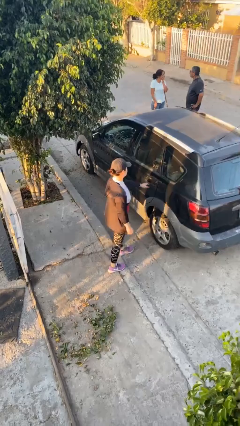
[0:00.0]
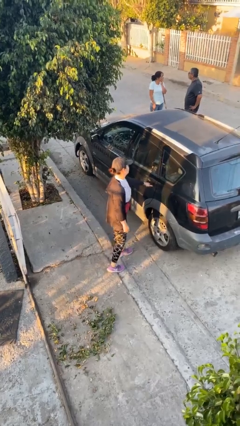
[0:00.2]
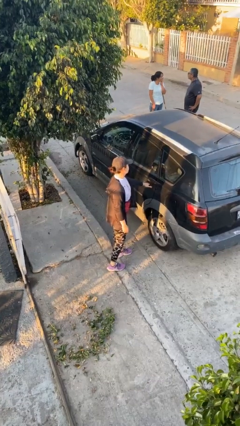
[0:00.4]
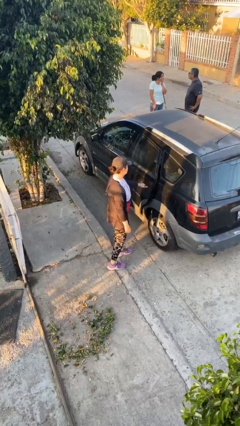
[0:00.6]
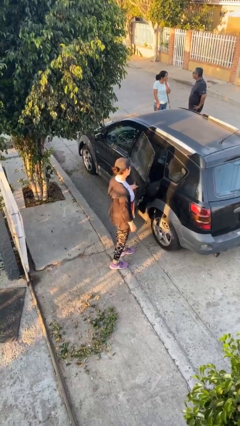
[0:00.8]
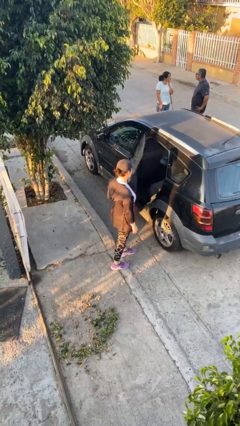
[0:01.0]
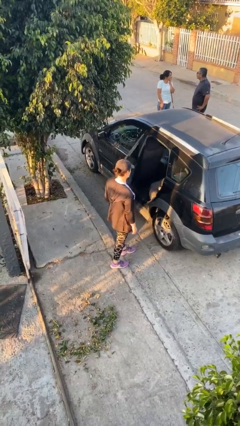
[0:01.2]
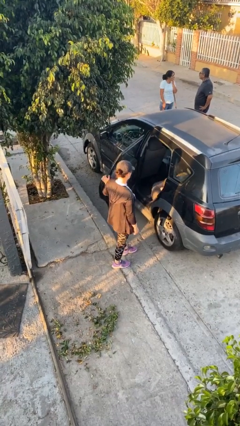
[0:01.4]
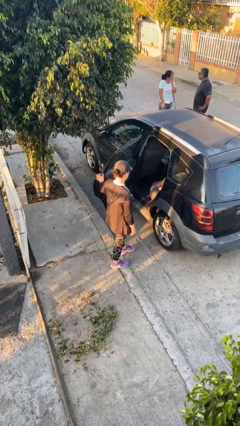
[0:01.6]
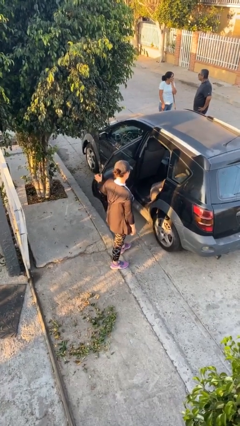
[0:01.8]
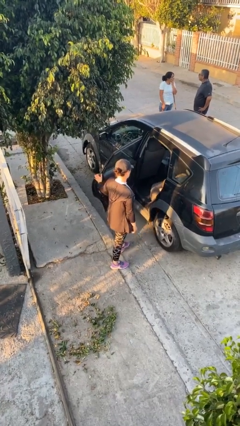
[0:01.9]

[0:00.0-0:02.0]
person opens car door

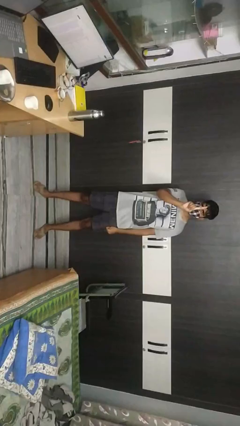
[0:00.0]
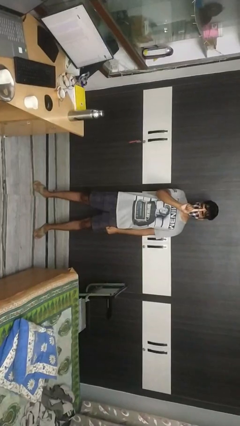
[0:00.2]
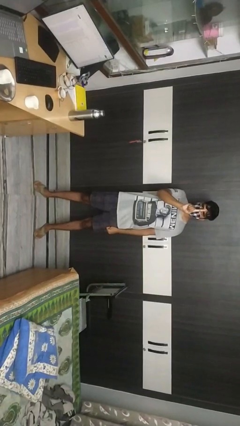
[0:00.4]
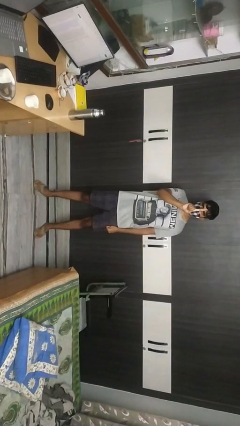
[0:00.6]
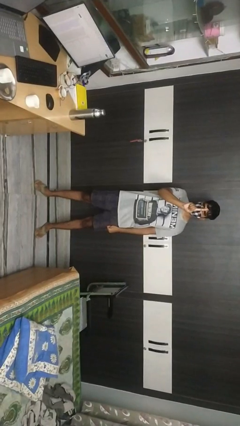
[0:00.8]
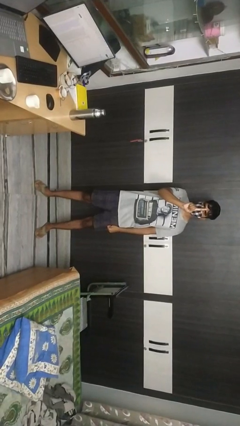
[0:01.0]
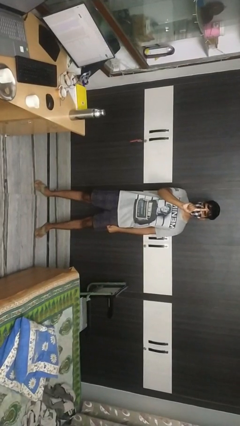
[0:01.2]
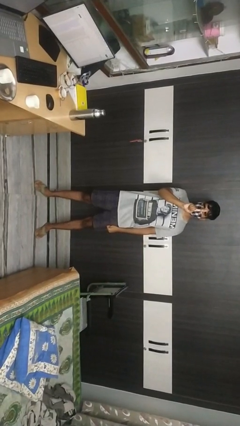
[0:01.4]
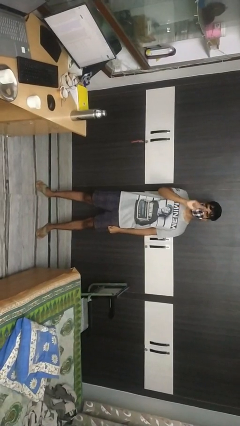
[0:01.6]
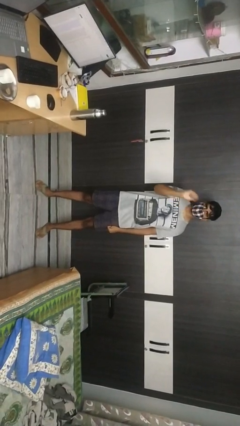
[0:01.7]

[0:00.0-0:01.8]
person gestures number one

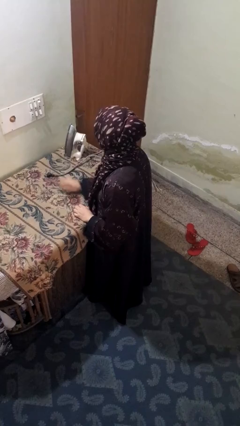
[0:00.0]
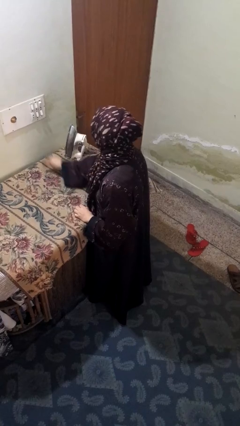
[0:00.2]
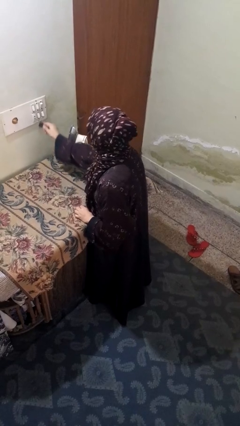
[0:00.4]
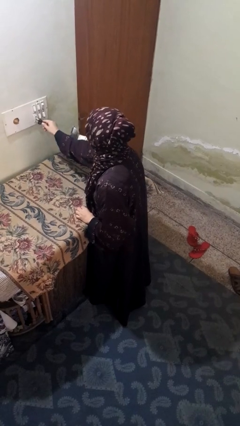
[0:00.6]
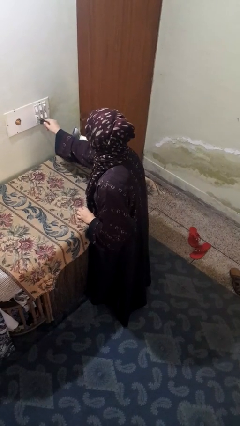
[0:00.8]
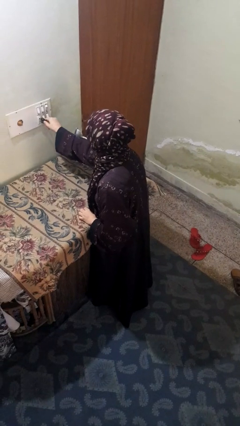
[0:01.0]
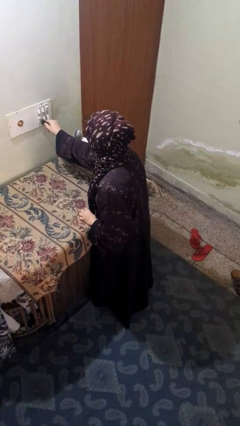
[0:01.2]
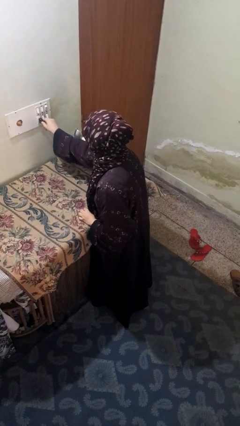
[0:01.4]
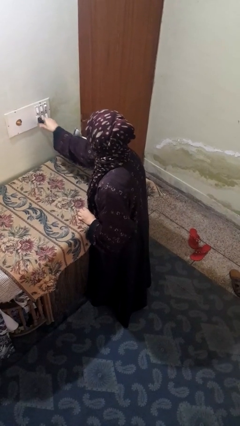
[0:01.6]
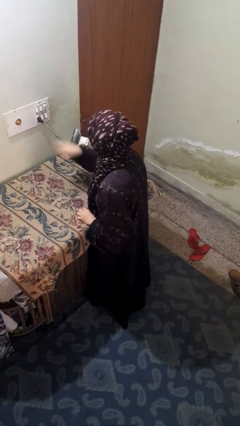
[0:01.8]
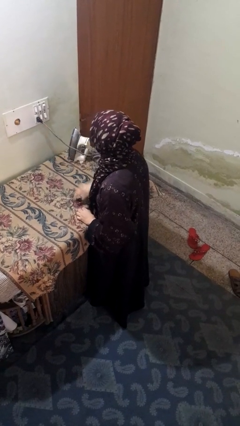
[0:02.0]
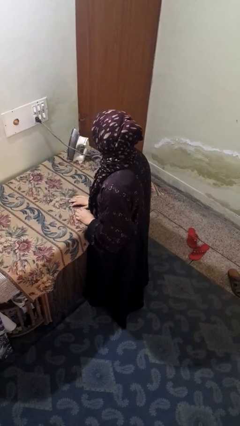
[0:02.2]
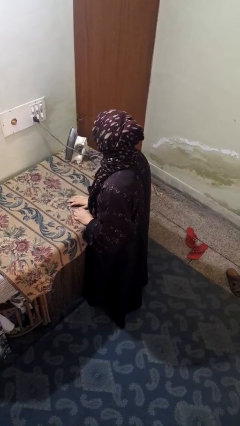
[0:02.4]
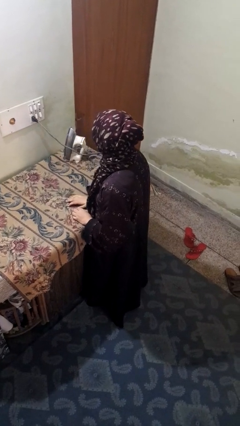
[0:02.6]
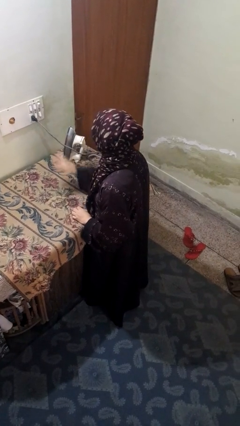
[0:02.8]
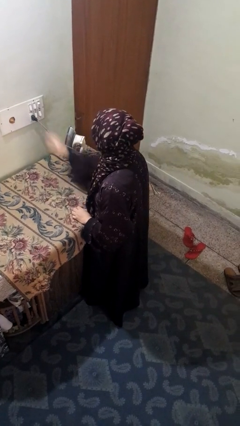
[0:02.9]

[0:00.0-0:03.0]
person plugs into electrical socket

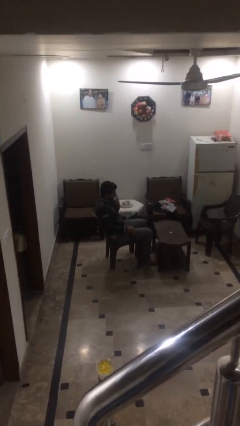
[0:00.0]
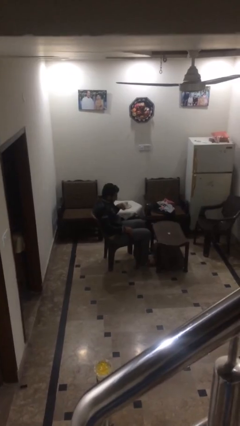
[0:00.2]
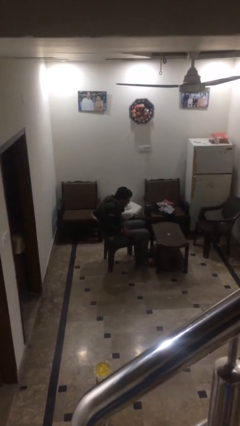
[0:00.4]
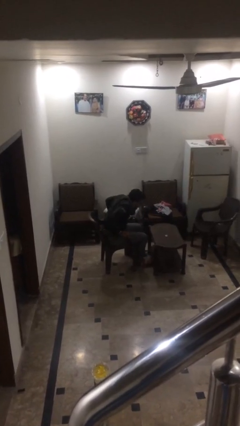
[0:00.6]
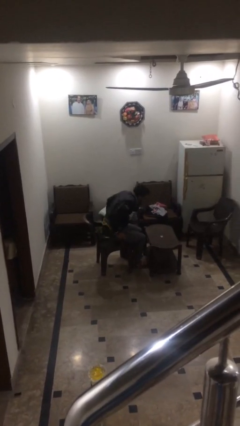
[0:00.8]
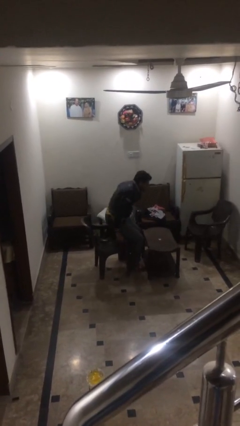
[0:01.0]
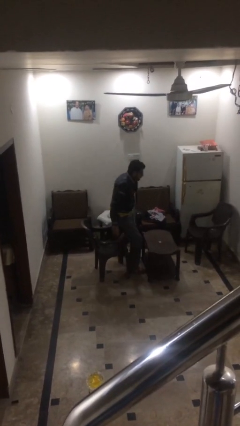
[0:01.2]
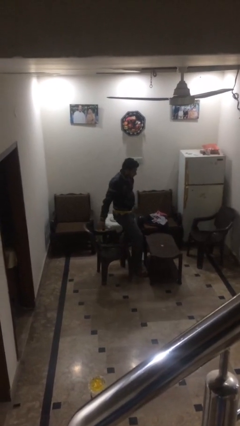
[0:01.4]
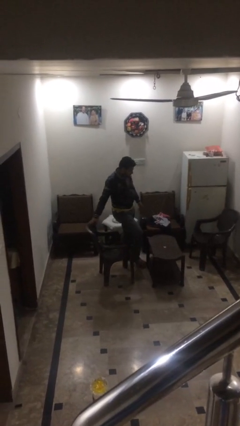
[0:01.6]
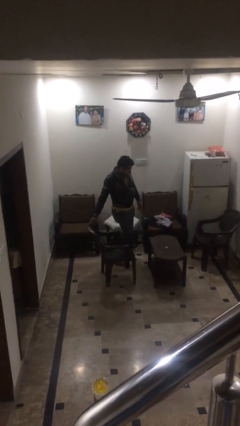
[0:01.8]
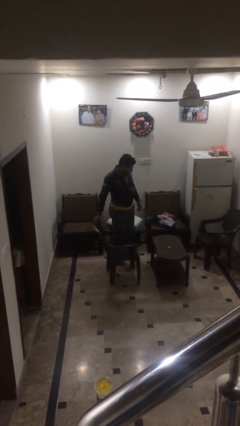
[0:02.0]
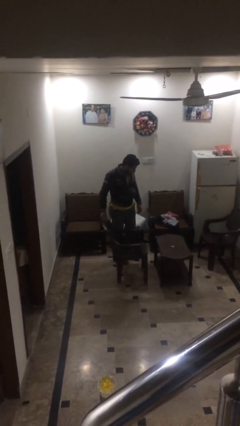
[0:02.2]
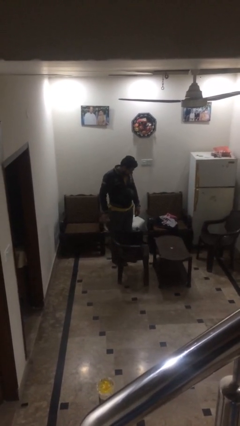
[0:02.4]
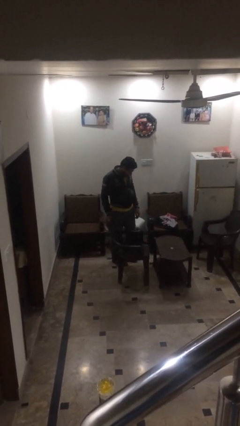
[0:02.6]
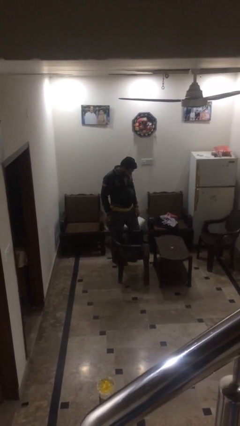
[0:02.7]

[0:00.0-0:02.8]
person stands up

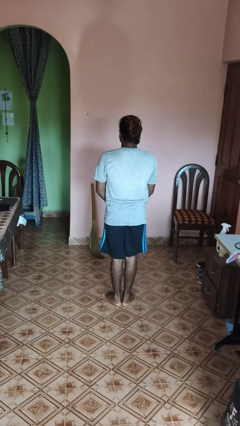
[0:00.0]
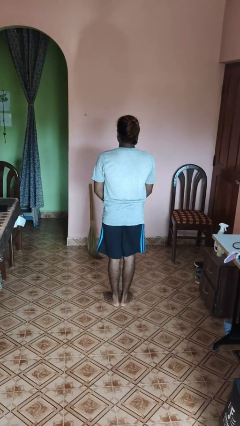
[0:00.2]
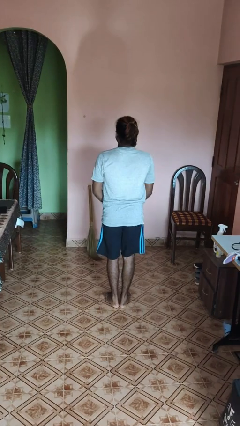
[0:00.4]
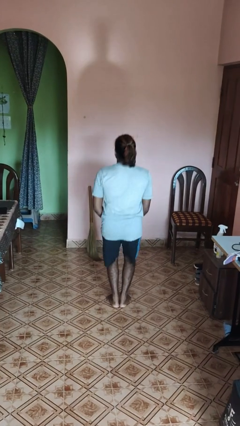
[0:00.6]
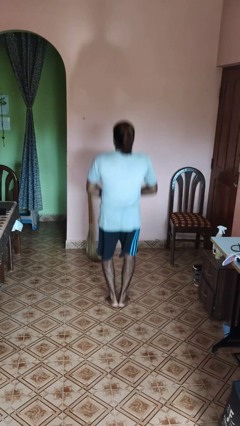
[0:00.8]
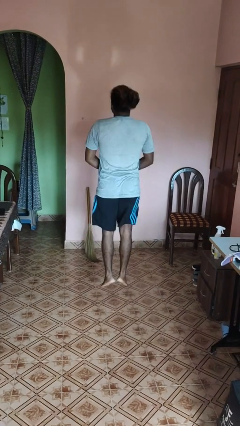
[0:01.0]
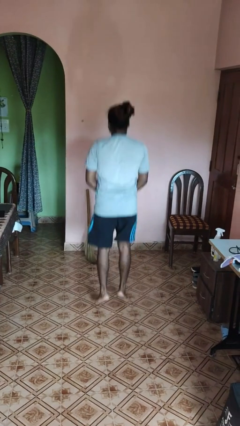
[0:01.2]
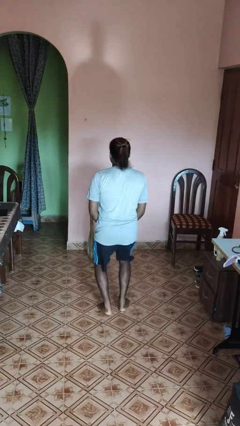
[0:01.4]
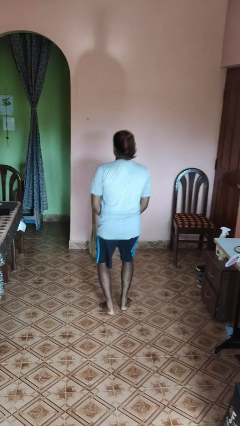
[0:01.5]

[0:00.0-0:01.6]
person jumps

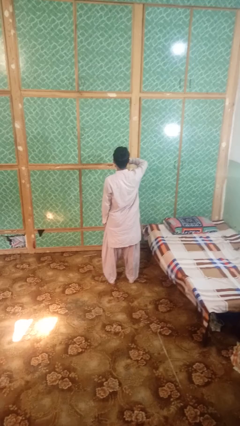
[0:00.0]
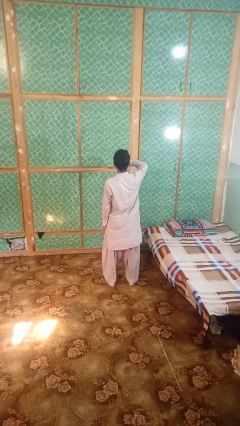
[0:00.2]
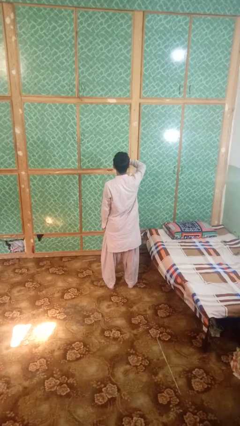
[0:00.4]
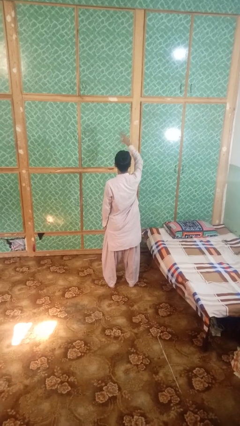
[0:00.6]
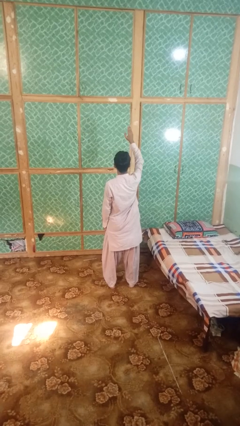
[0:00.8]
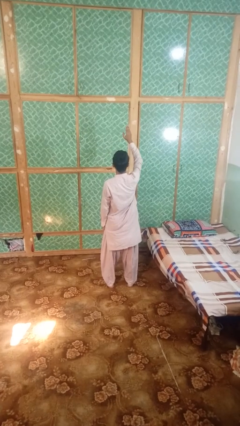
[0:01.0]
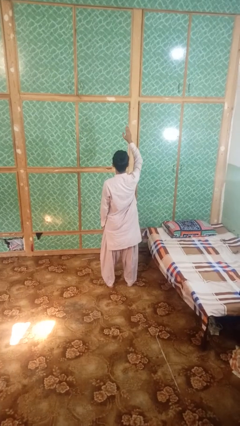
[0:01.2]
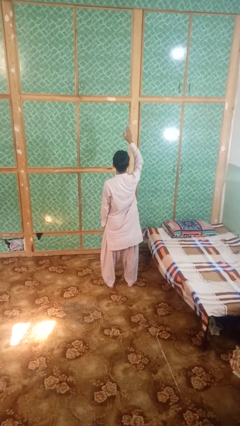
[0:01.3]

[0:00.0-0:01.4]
person gestures swipe up

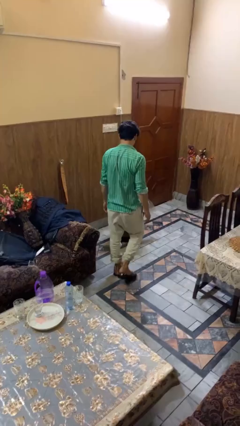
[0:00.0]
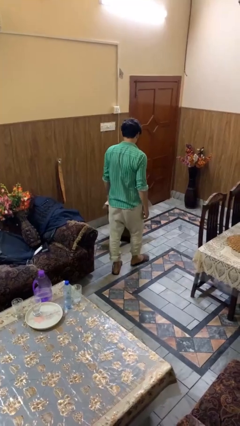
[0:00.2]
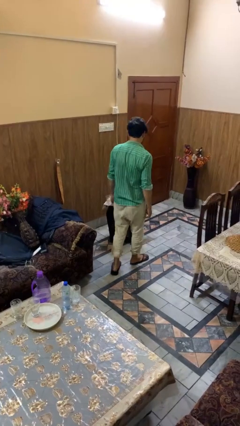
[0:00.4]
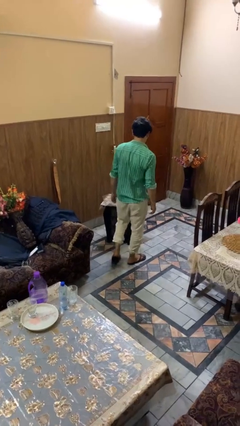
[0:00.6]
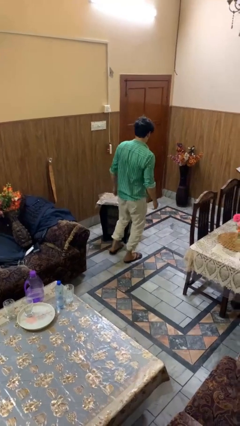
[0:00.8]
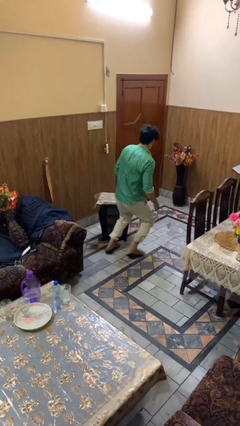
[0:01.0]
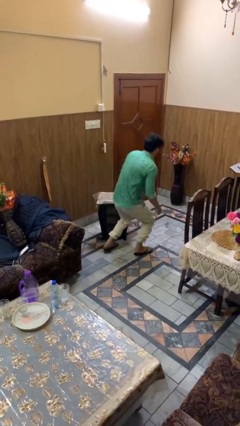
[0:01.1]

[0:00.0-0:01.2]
person trips on object on floor

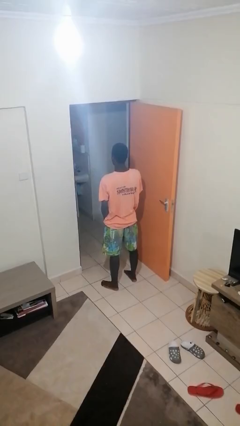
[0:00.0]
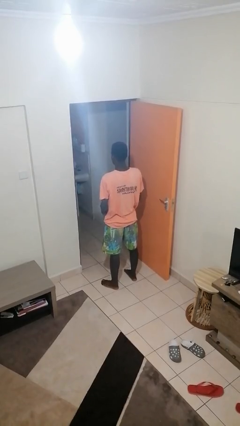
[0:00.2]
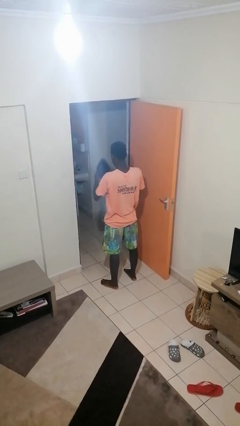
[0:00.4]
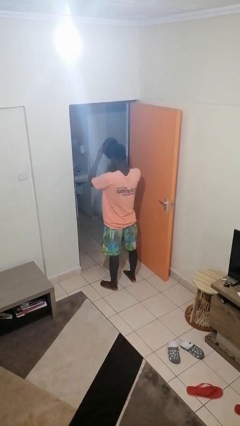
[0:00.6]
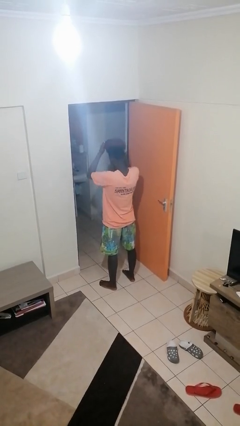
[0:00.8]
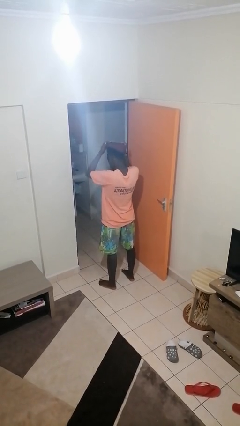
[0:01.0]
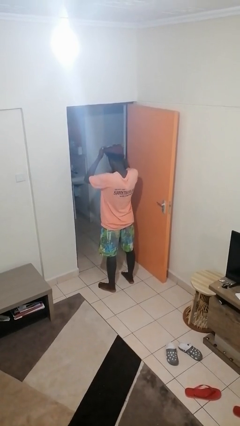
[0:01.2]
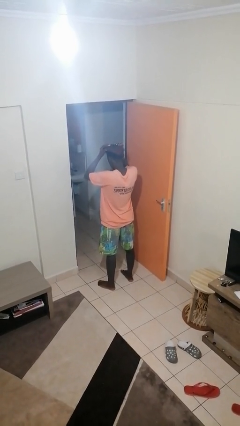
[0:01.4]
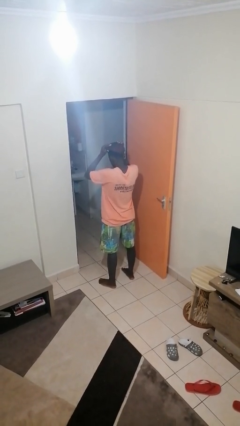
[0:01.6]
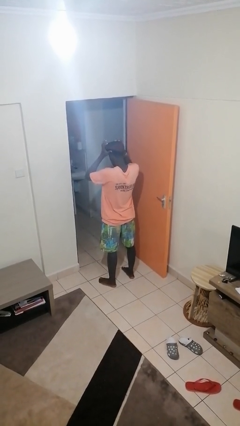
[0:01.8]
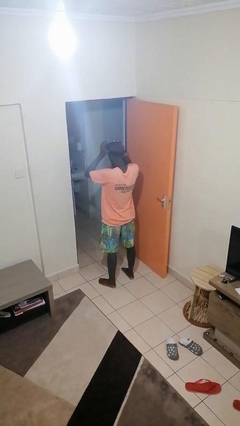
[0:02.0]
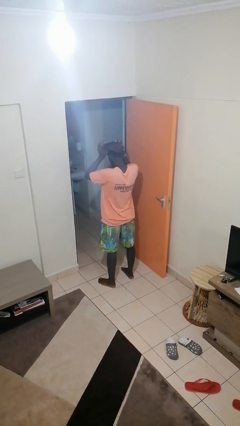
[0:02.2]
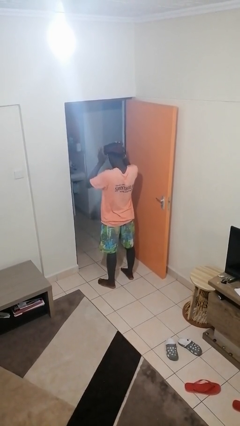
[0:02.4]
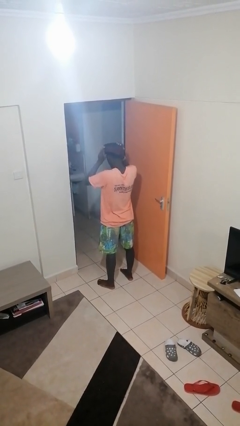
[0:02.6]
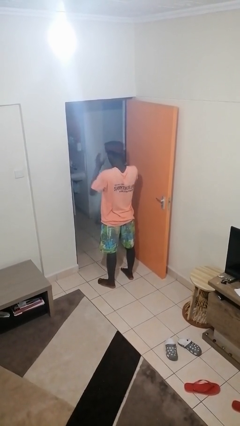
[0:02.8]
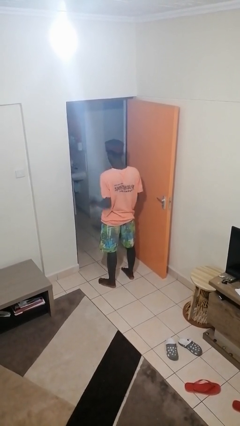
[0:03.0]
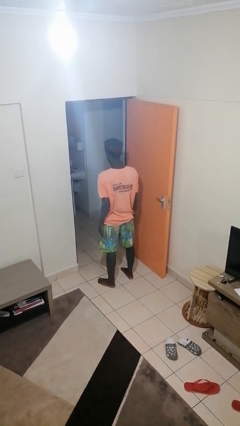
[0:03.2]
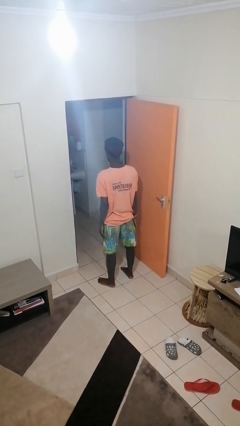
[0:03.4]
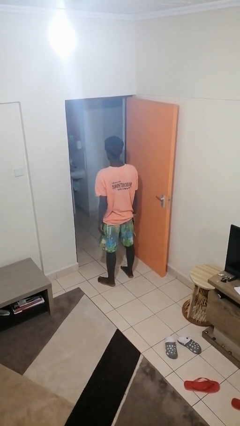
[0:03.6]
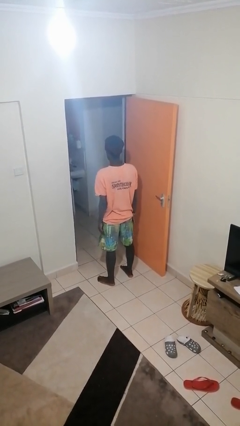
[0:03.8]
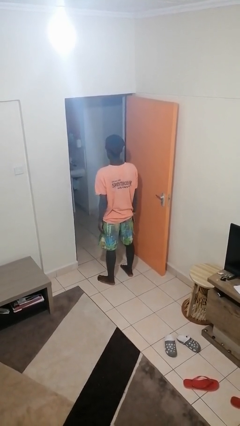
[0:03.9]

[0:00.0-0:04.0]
person puts on hat
